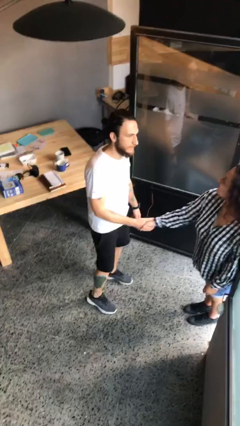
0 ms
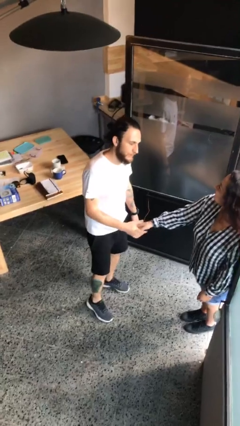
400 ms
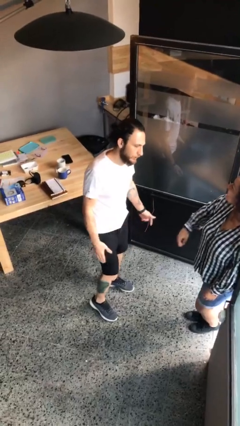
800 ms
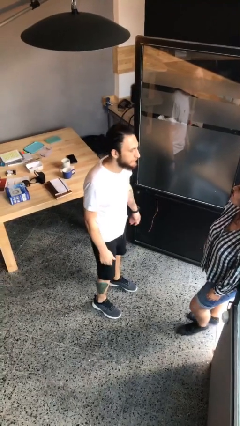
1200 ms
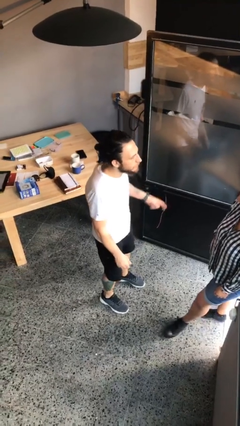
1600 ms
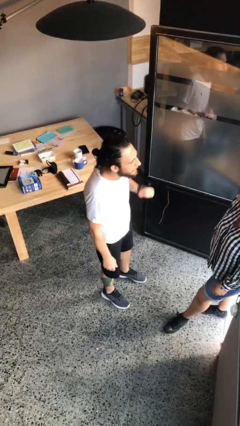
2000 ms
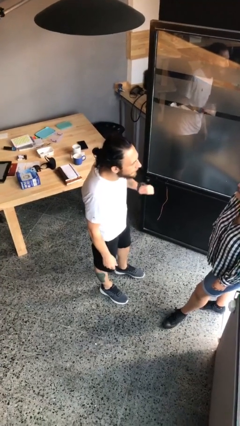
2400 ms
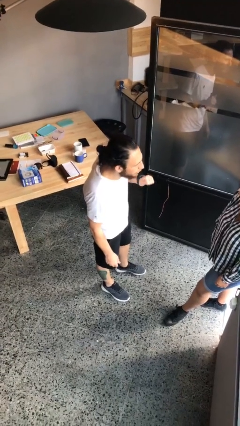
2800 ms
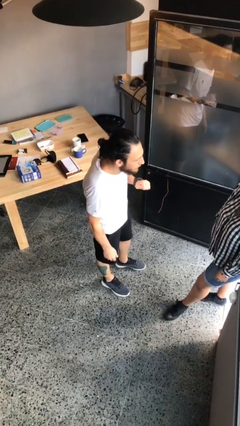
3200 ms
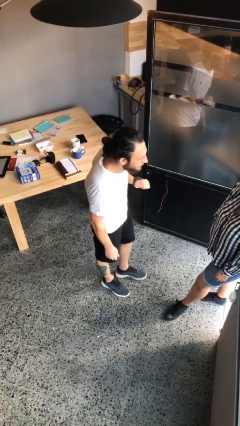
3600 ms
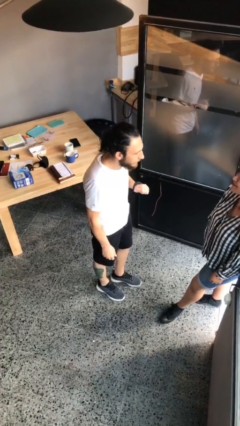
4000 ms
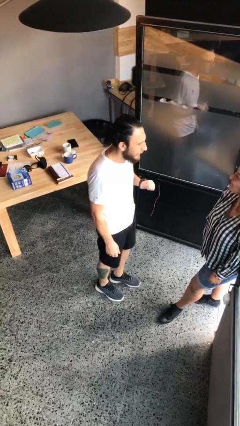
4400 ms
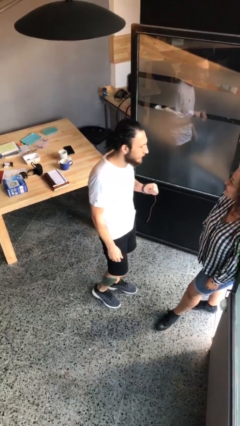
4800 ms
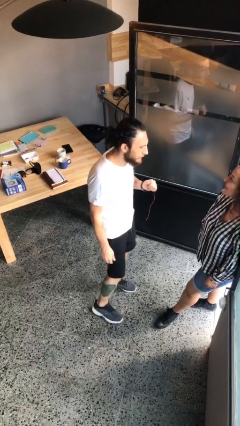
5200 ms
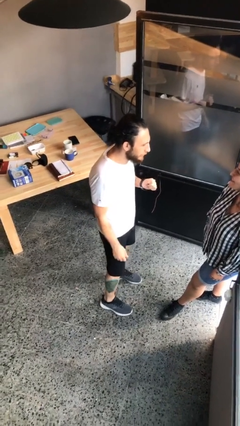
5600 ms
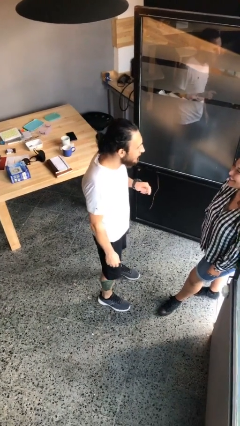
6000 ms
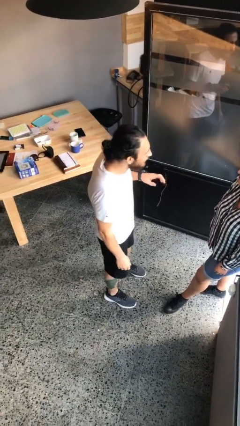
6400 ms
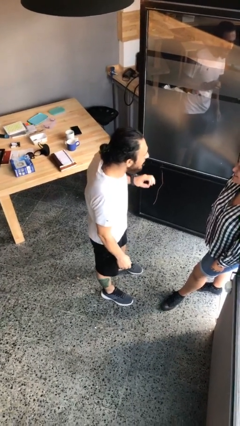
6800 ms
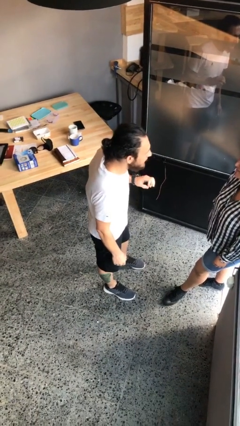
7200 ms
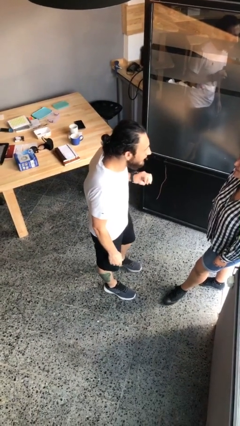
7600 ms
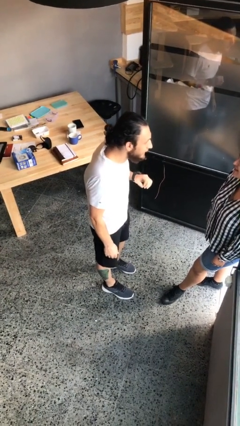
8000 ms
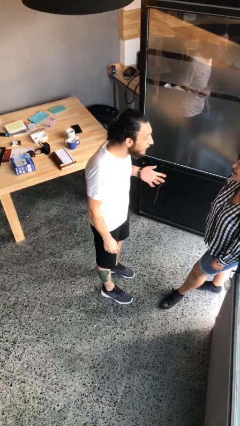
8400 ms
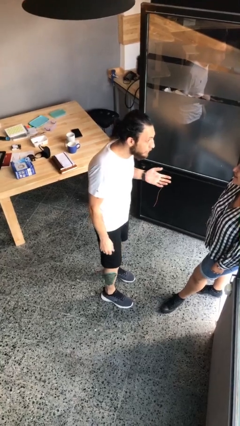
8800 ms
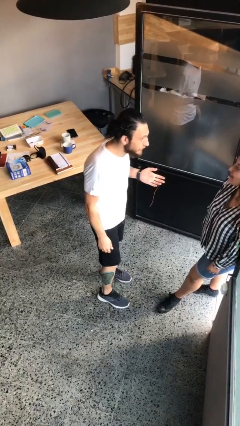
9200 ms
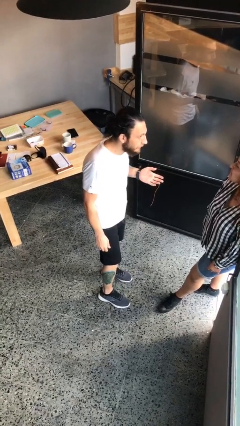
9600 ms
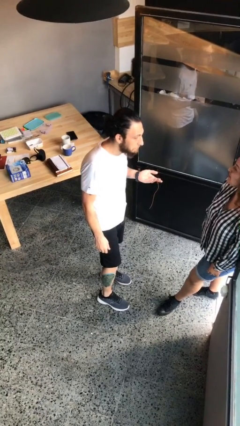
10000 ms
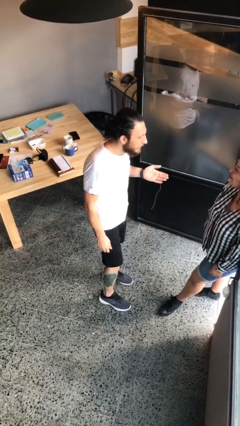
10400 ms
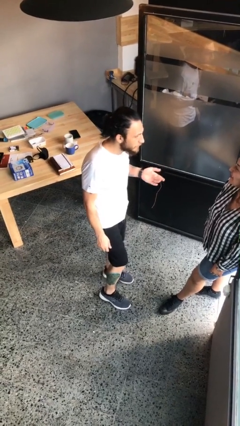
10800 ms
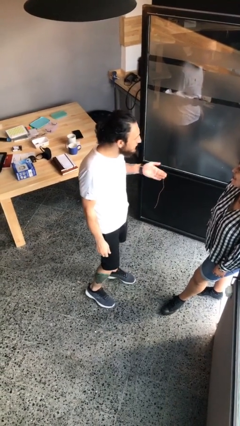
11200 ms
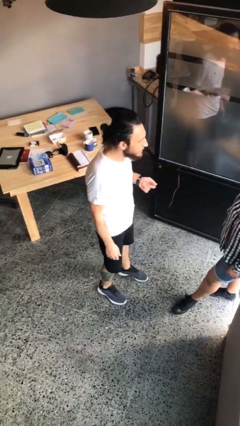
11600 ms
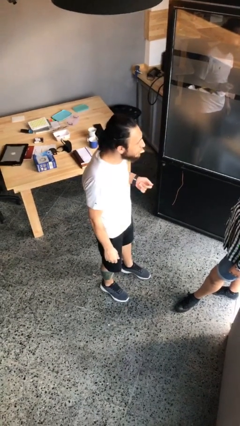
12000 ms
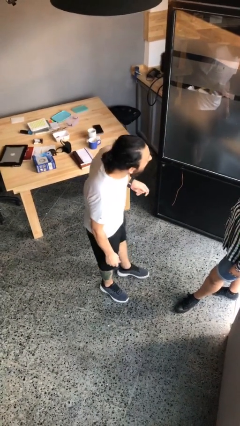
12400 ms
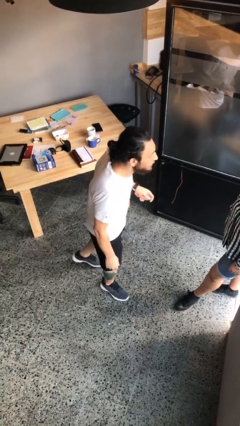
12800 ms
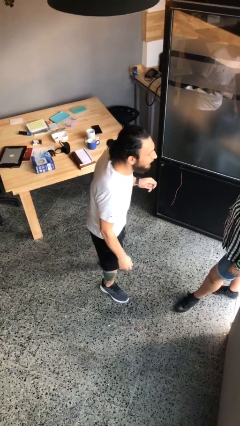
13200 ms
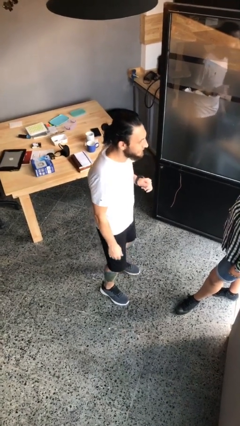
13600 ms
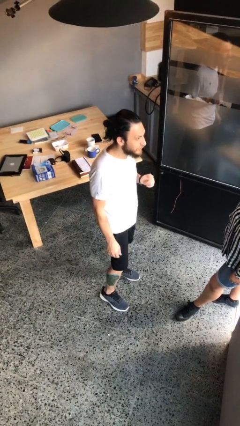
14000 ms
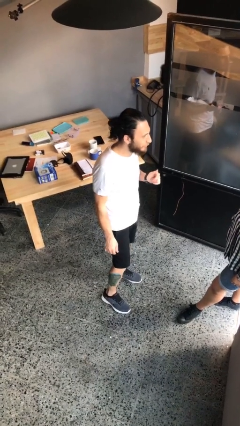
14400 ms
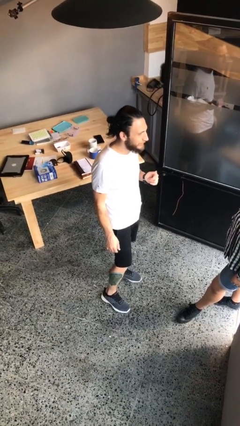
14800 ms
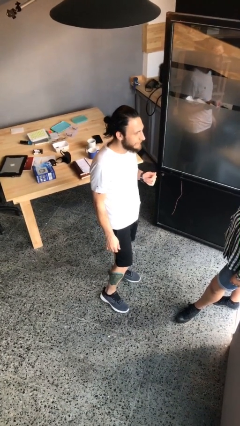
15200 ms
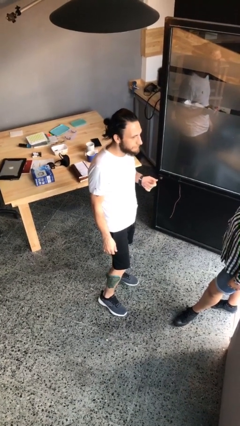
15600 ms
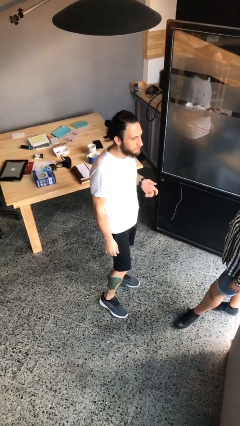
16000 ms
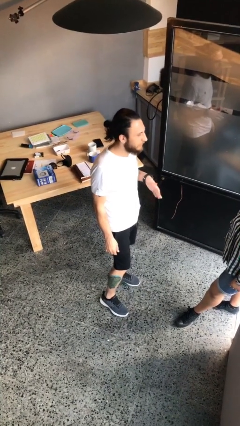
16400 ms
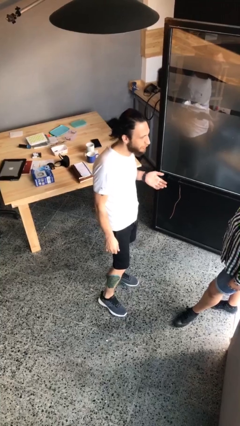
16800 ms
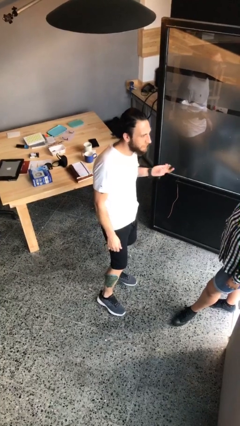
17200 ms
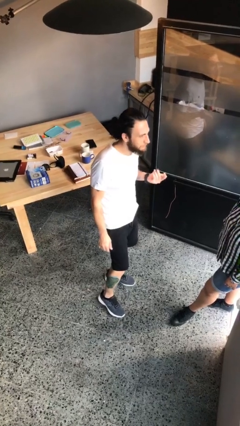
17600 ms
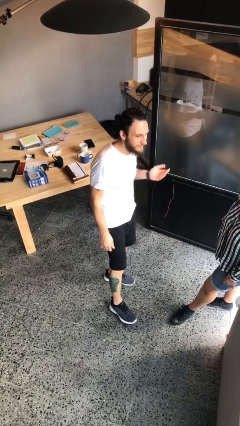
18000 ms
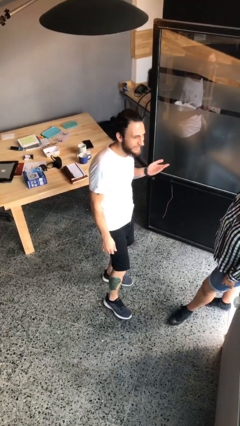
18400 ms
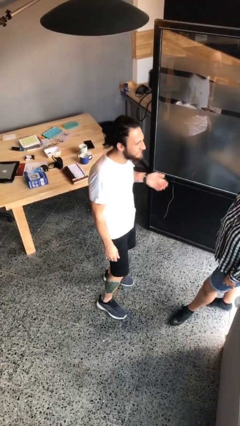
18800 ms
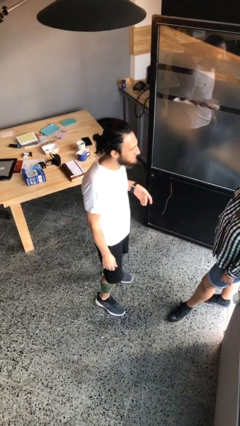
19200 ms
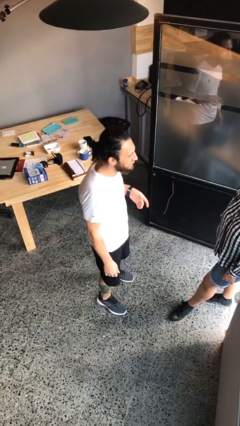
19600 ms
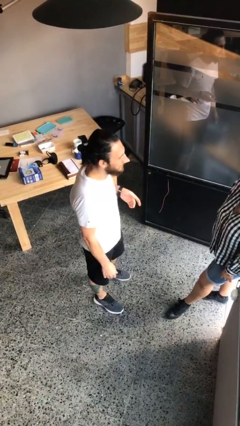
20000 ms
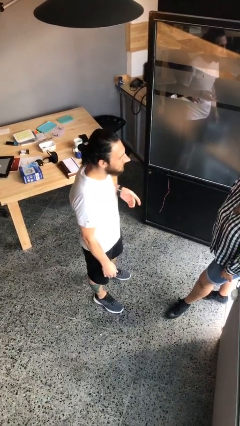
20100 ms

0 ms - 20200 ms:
person talks to person

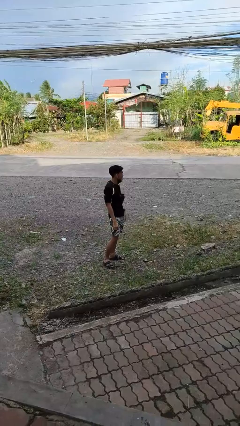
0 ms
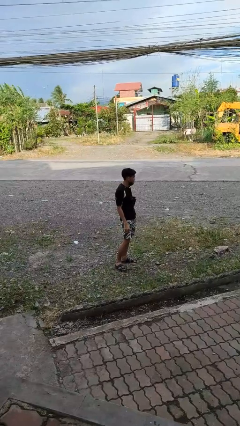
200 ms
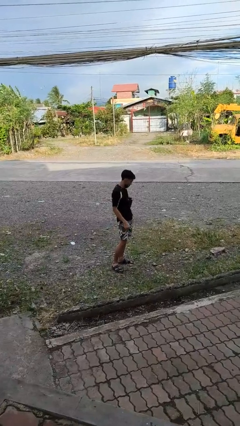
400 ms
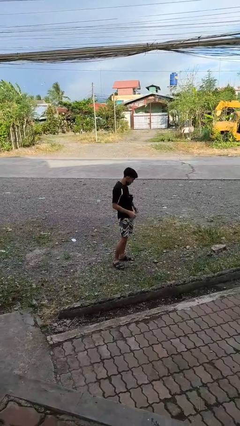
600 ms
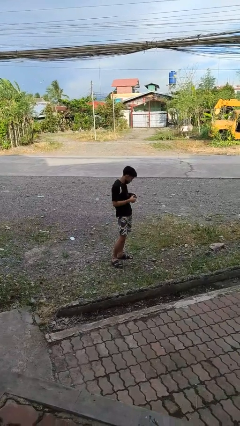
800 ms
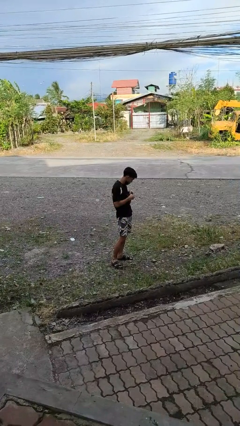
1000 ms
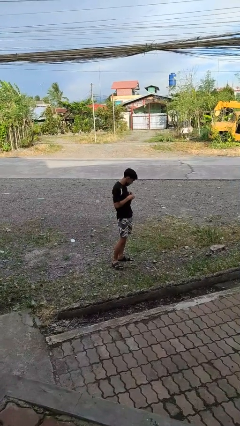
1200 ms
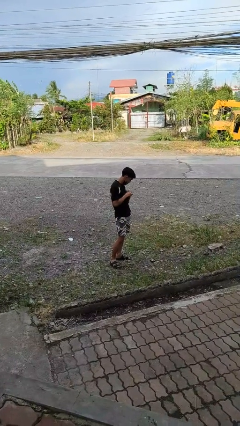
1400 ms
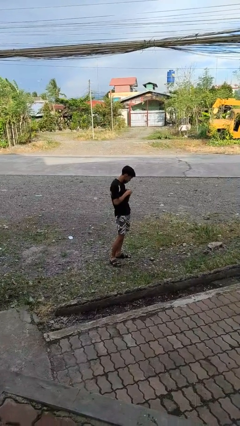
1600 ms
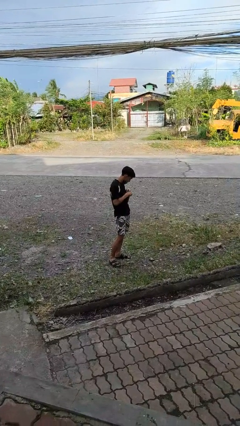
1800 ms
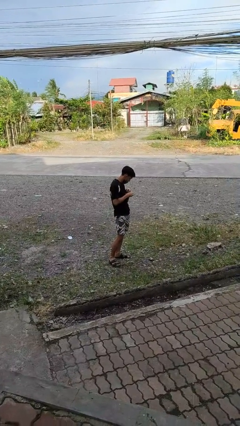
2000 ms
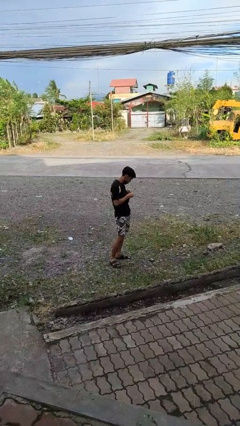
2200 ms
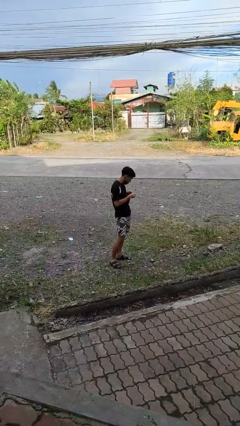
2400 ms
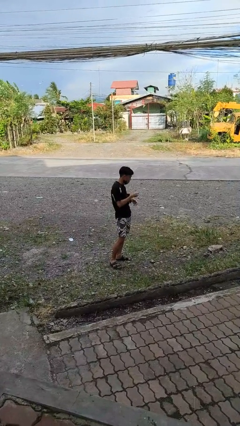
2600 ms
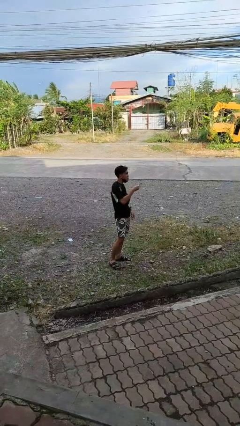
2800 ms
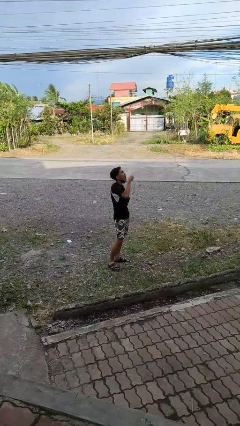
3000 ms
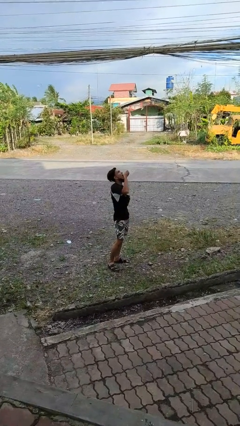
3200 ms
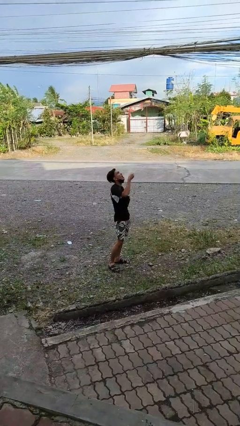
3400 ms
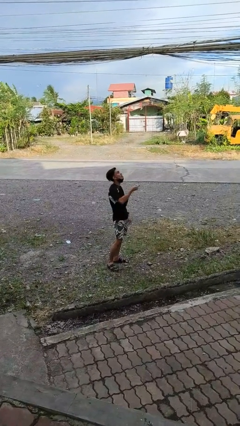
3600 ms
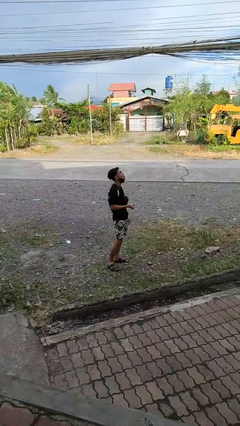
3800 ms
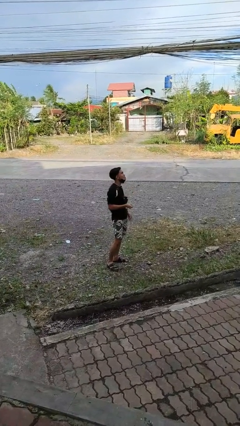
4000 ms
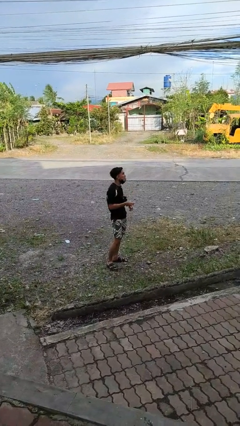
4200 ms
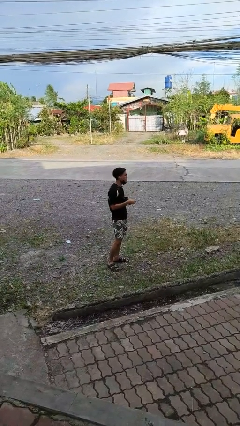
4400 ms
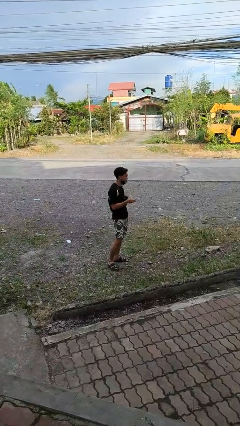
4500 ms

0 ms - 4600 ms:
person eats snack from bag

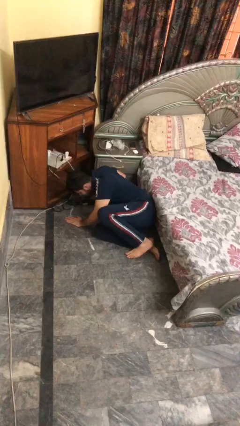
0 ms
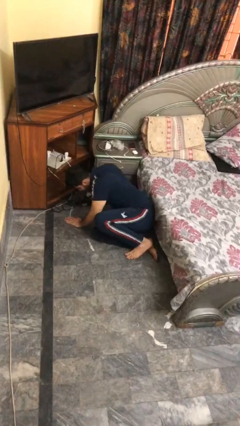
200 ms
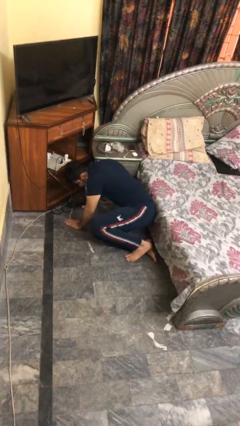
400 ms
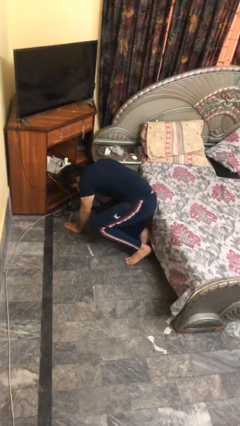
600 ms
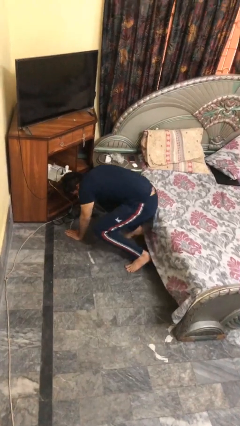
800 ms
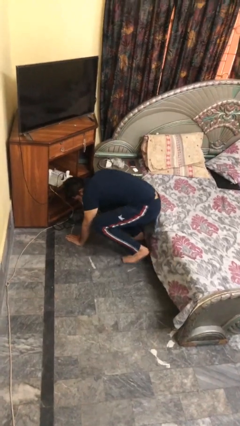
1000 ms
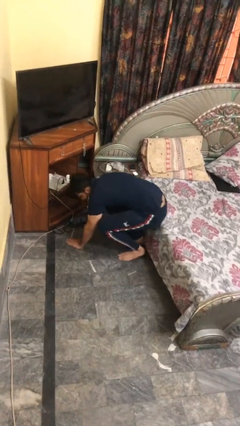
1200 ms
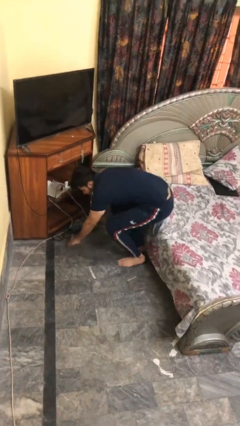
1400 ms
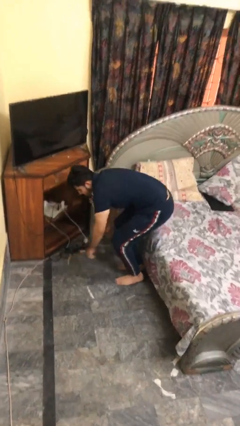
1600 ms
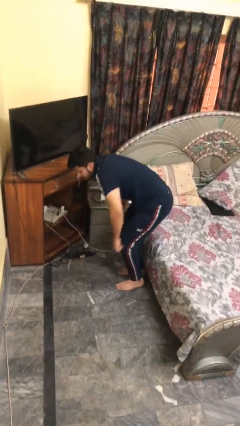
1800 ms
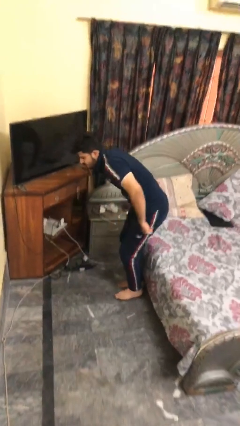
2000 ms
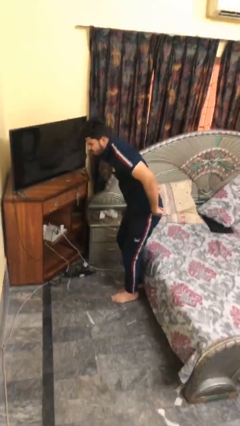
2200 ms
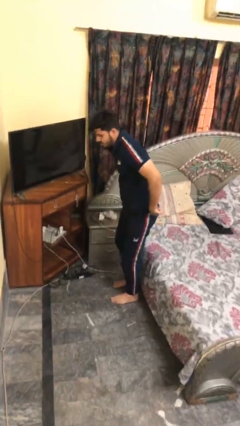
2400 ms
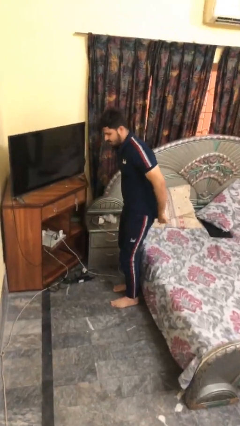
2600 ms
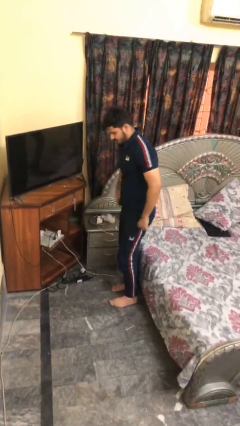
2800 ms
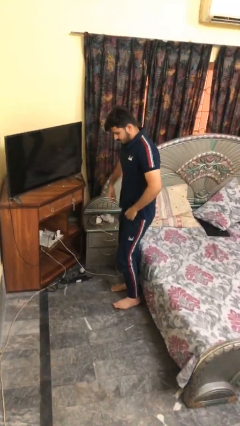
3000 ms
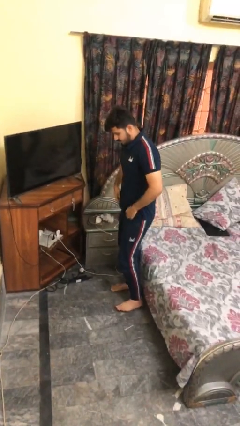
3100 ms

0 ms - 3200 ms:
person stands up from floor
